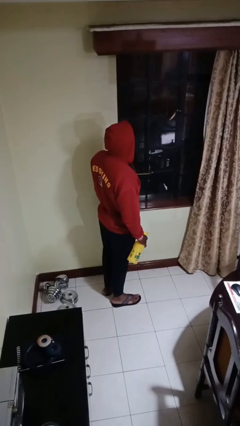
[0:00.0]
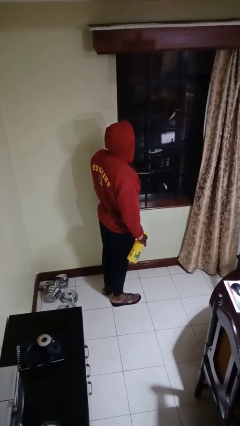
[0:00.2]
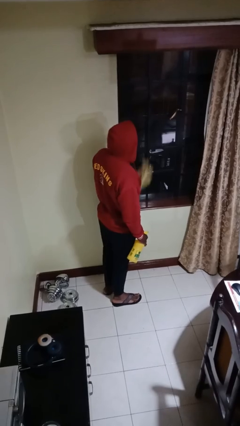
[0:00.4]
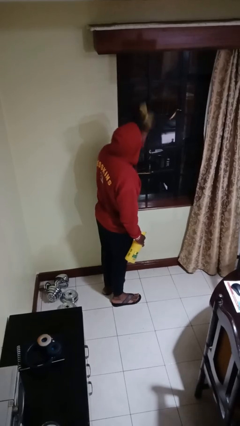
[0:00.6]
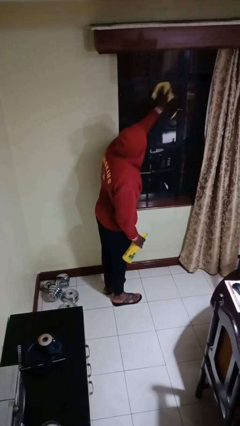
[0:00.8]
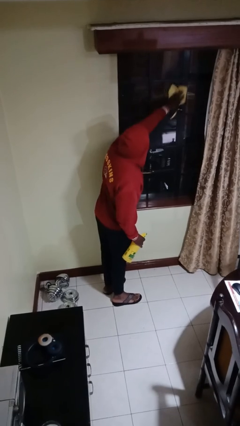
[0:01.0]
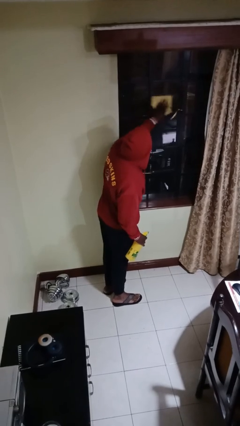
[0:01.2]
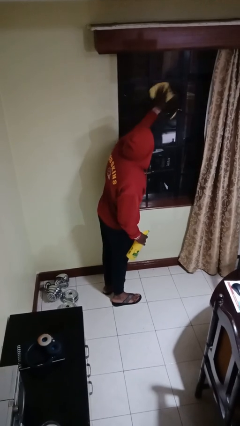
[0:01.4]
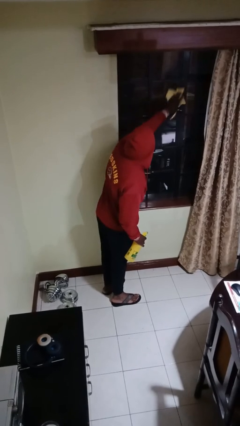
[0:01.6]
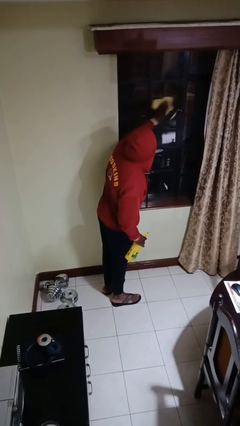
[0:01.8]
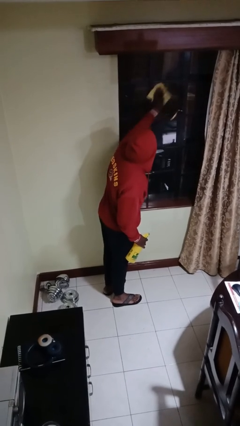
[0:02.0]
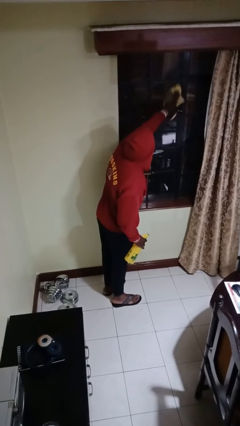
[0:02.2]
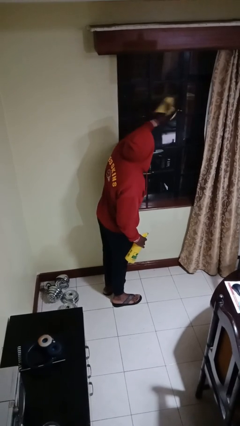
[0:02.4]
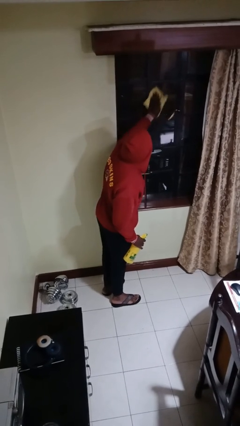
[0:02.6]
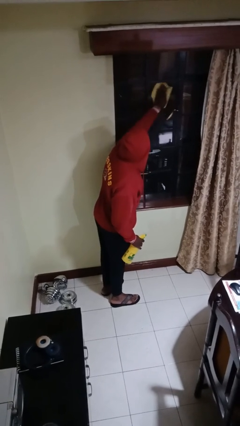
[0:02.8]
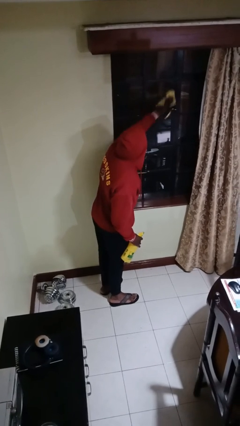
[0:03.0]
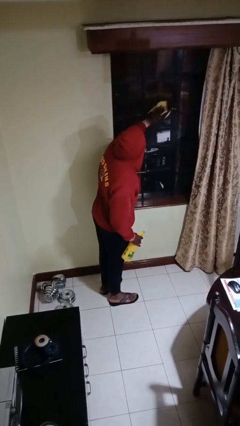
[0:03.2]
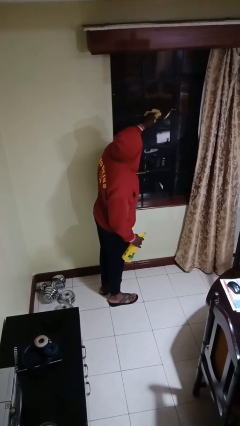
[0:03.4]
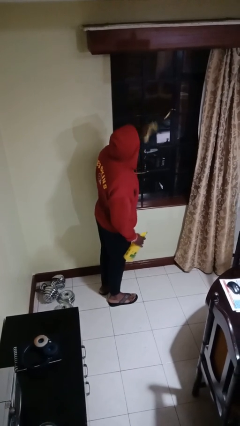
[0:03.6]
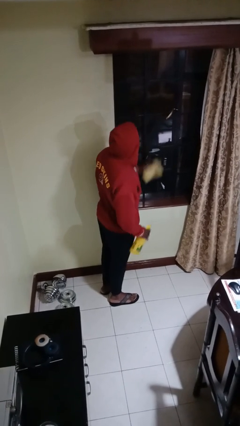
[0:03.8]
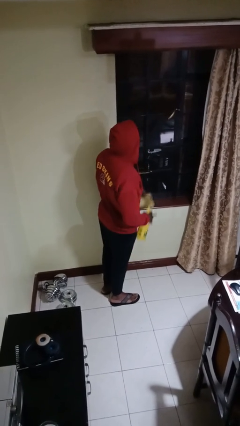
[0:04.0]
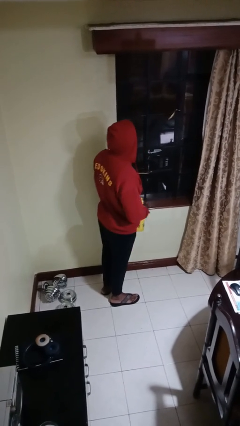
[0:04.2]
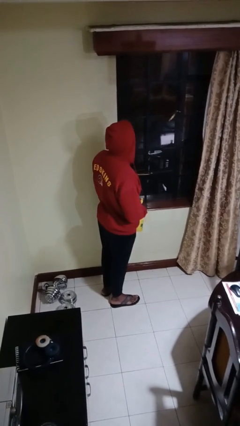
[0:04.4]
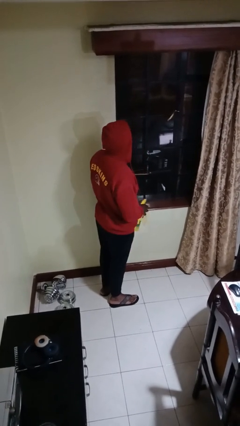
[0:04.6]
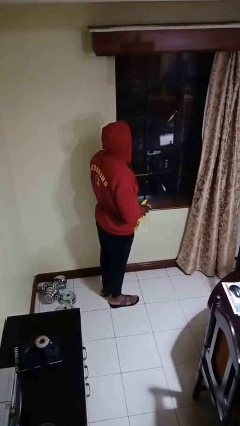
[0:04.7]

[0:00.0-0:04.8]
person washes window

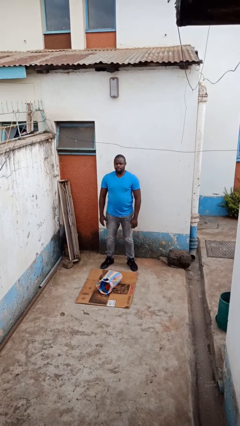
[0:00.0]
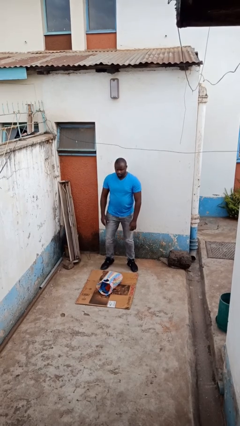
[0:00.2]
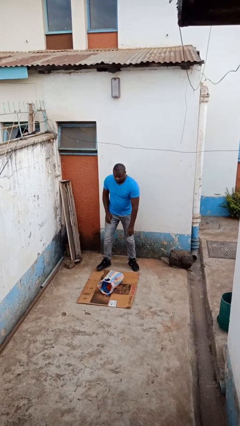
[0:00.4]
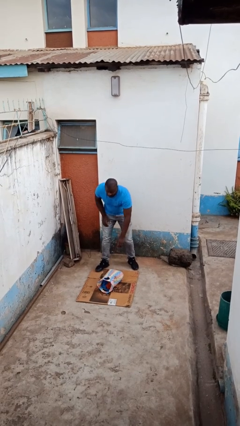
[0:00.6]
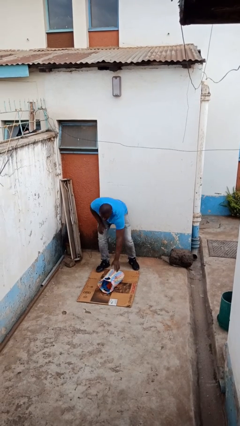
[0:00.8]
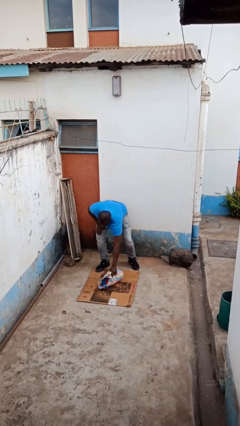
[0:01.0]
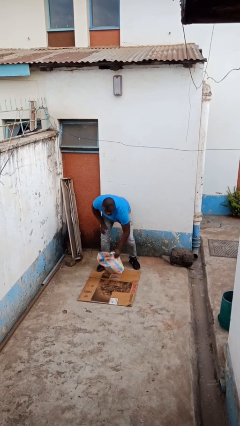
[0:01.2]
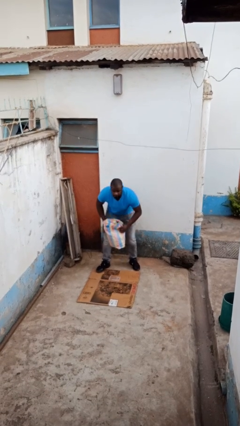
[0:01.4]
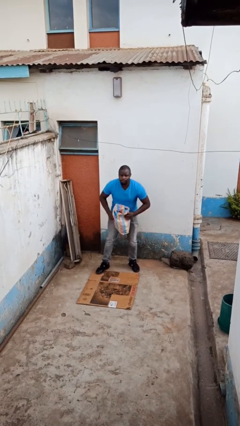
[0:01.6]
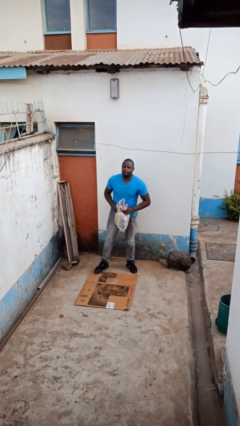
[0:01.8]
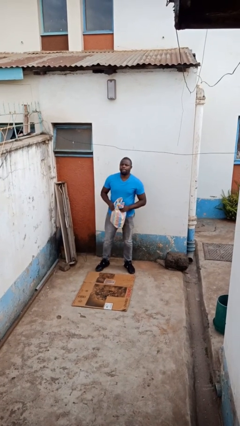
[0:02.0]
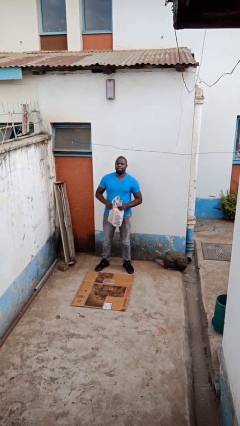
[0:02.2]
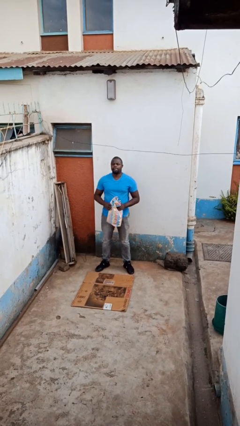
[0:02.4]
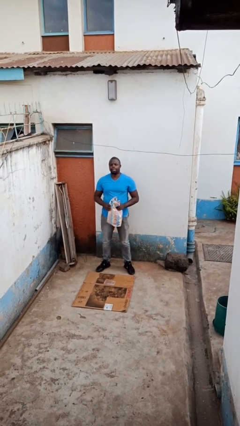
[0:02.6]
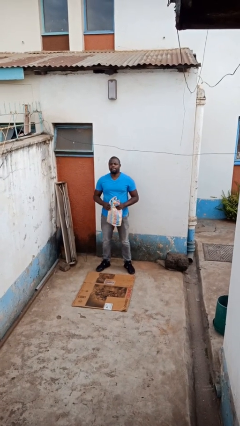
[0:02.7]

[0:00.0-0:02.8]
person picks up object from floor

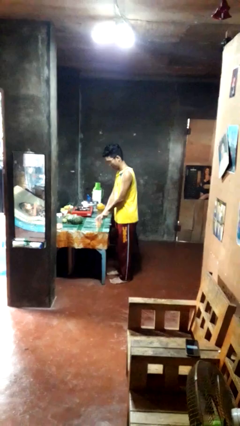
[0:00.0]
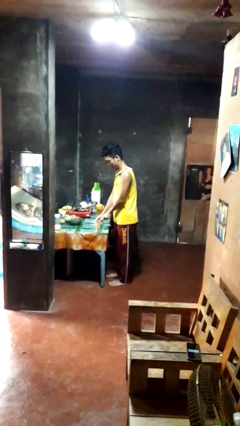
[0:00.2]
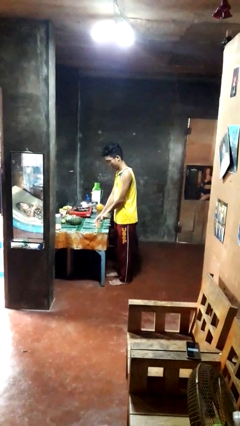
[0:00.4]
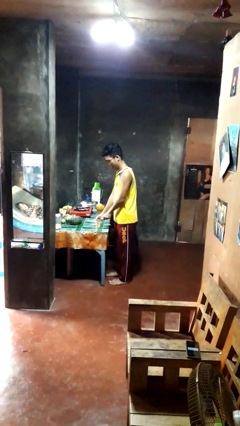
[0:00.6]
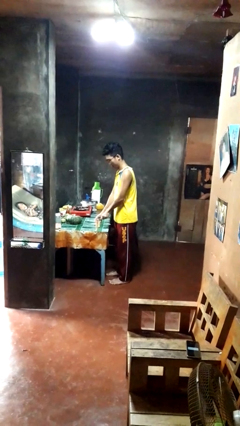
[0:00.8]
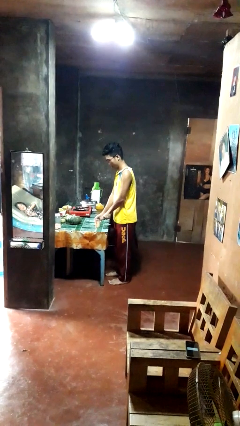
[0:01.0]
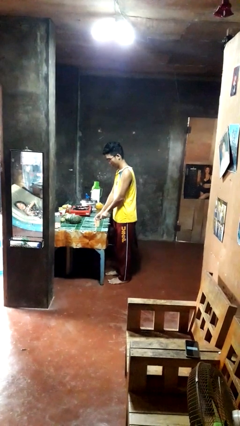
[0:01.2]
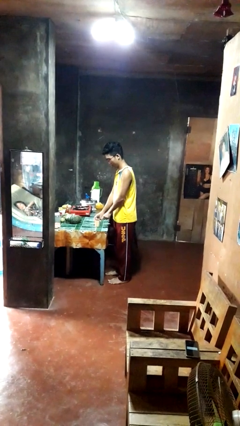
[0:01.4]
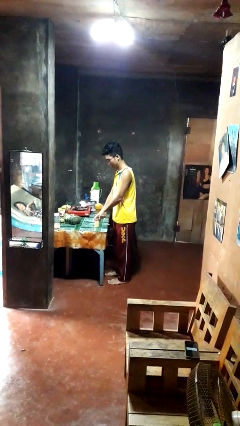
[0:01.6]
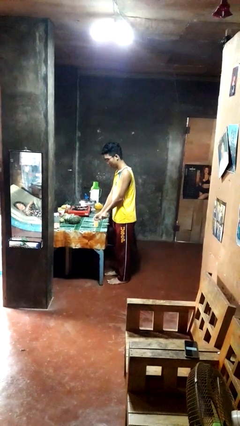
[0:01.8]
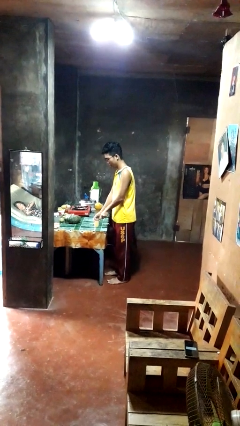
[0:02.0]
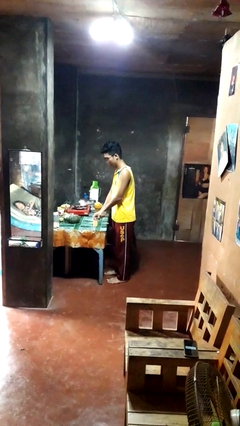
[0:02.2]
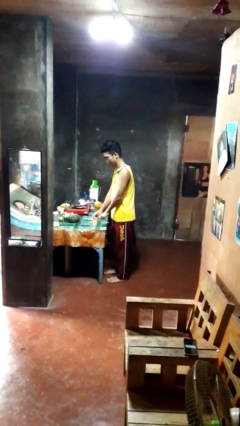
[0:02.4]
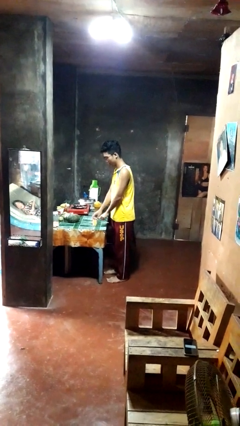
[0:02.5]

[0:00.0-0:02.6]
person opens can with can opener

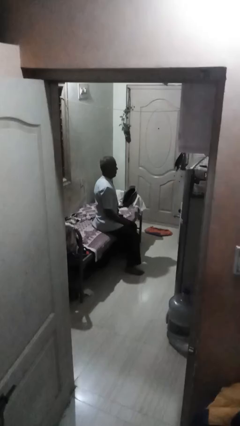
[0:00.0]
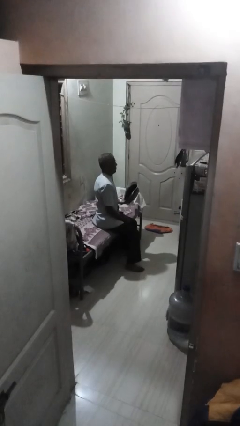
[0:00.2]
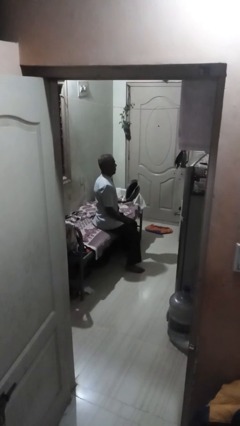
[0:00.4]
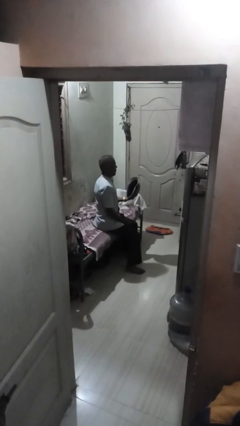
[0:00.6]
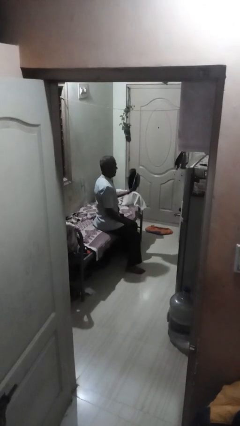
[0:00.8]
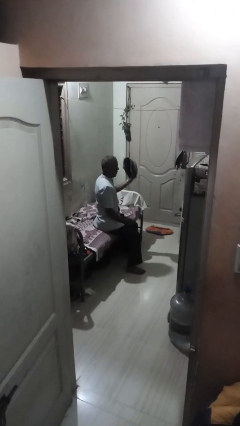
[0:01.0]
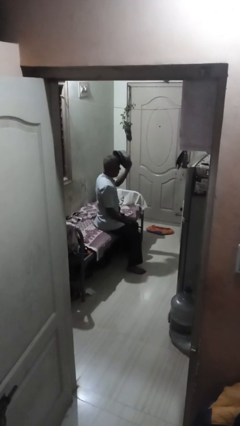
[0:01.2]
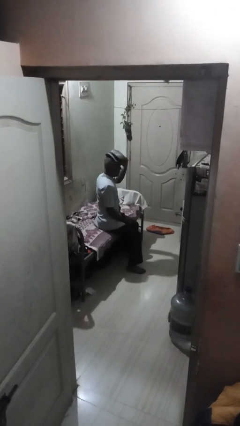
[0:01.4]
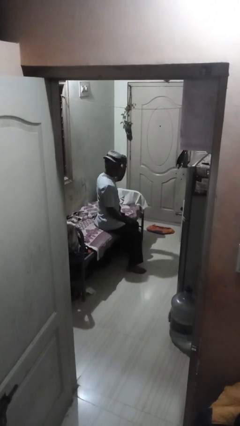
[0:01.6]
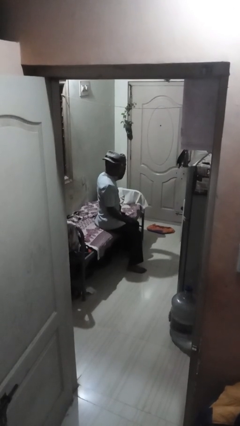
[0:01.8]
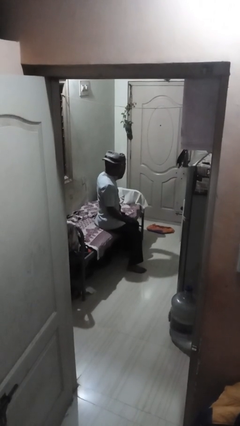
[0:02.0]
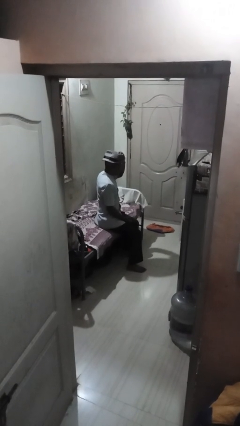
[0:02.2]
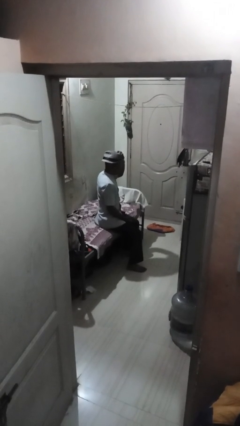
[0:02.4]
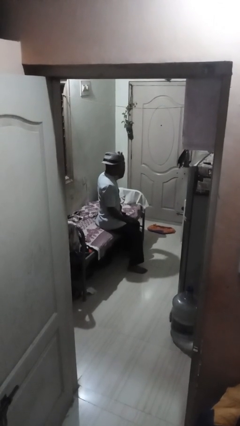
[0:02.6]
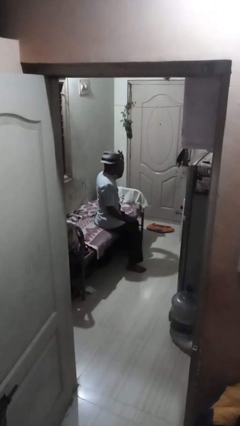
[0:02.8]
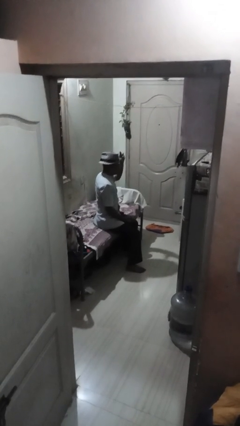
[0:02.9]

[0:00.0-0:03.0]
person puts on hat

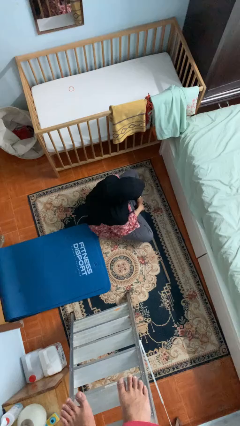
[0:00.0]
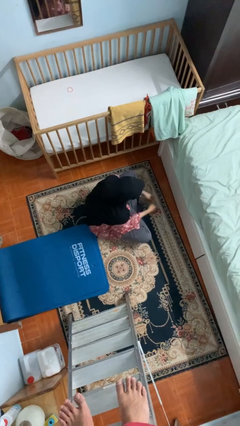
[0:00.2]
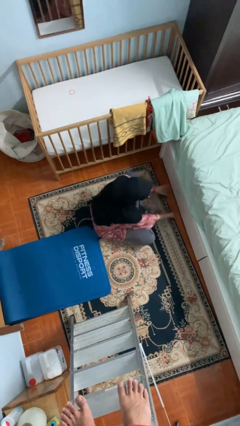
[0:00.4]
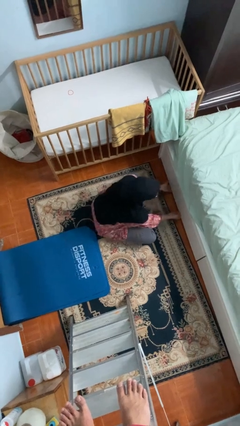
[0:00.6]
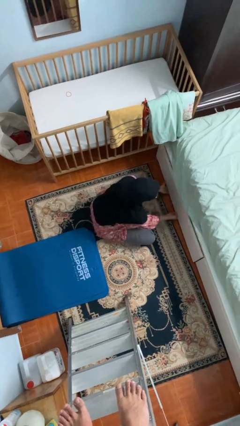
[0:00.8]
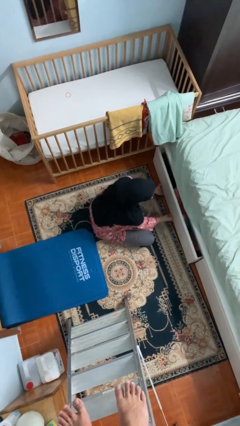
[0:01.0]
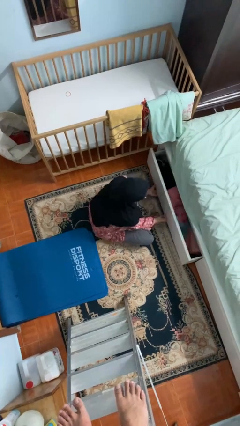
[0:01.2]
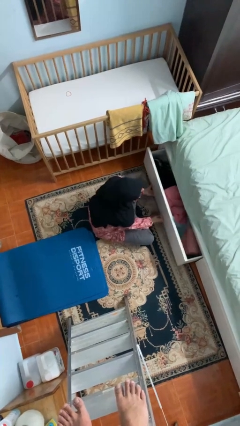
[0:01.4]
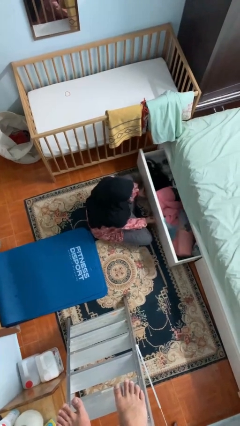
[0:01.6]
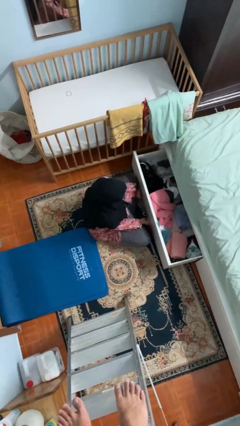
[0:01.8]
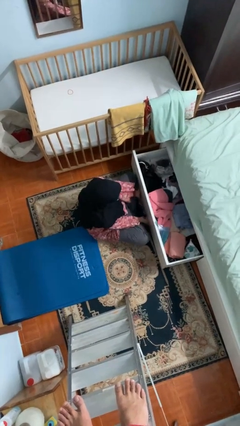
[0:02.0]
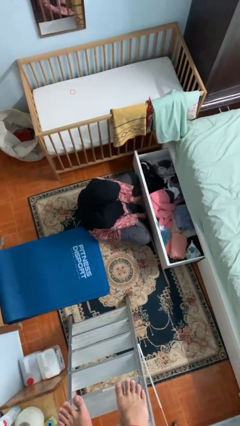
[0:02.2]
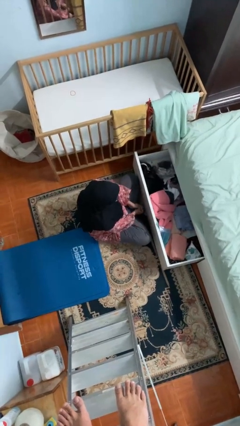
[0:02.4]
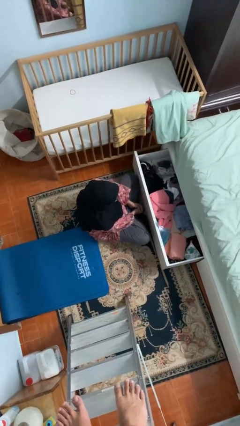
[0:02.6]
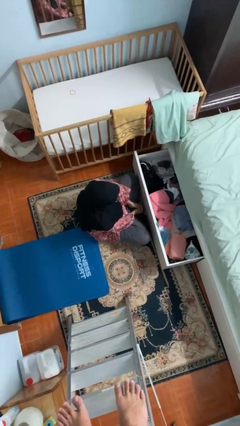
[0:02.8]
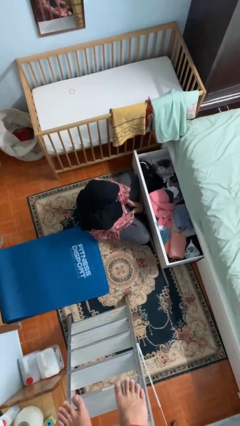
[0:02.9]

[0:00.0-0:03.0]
person opens dresser drawer

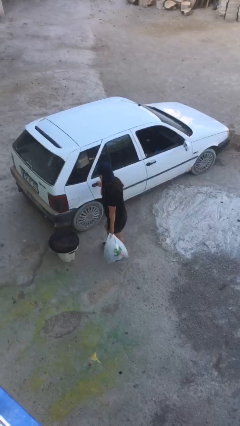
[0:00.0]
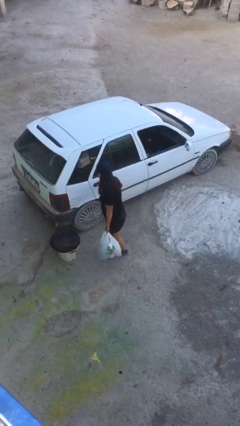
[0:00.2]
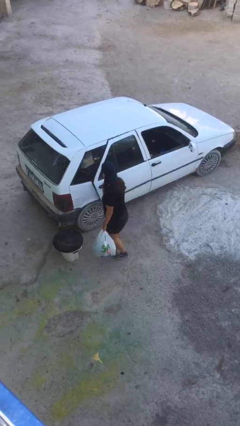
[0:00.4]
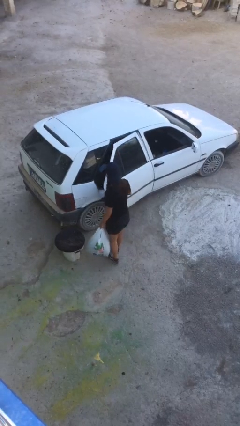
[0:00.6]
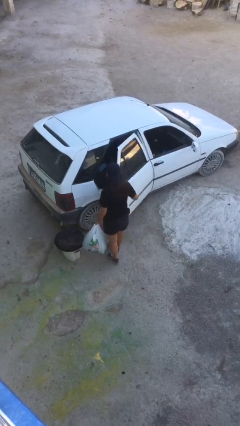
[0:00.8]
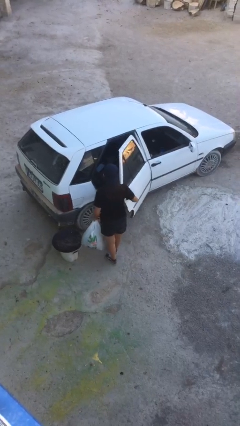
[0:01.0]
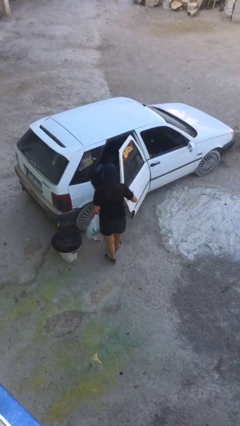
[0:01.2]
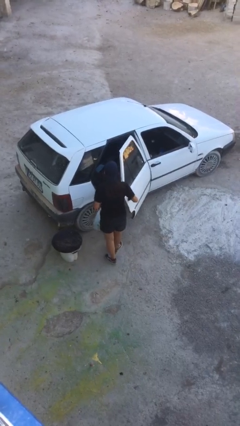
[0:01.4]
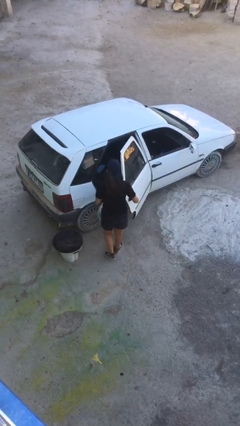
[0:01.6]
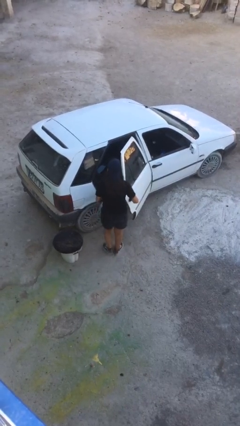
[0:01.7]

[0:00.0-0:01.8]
person opens car door
